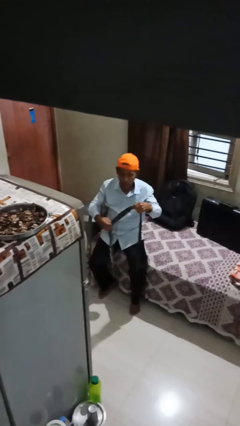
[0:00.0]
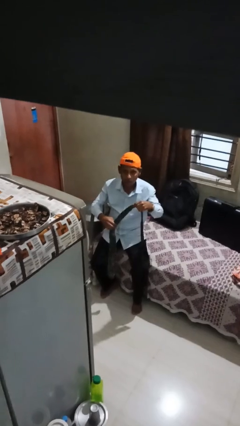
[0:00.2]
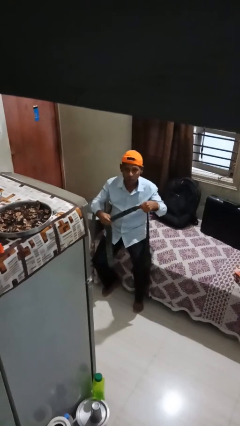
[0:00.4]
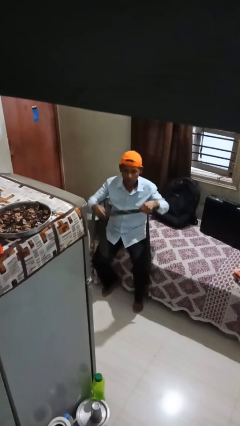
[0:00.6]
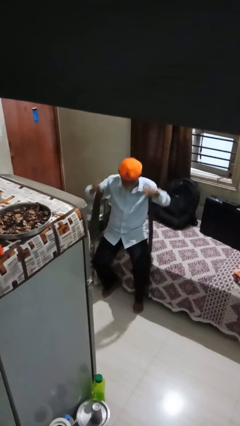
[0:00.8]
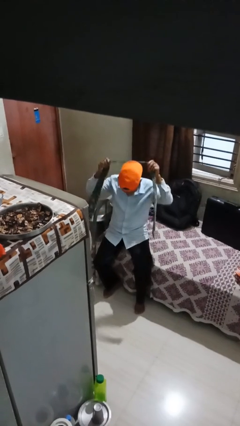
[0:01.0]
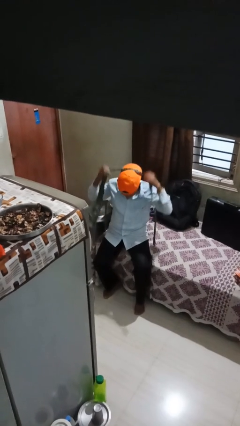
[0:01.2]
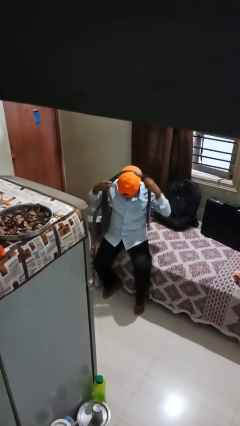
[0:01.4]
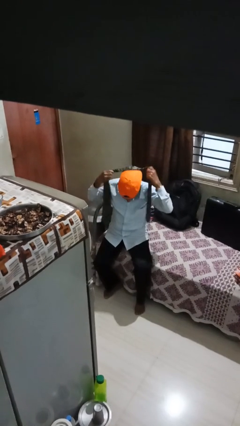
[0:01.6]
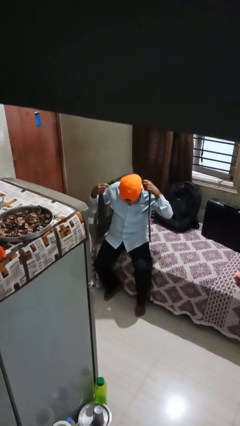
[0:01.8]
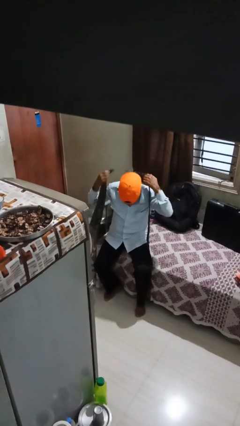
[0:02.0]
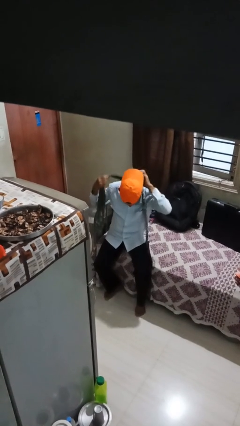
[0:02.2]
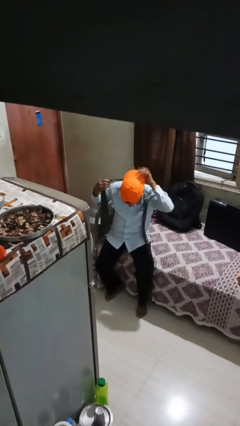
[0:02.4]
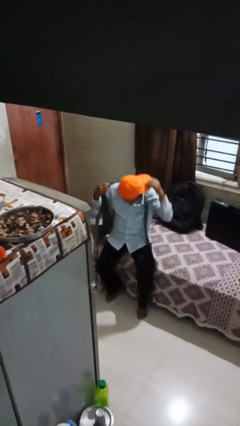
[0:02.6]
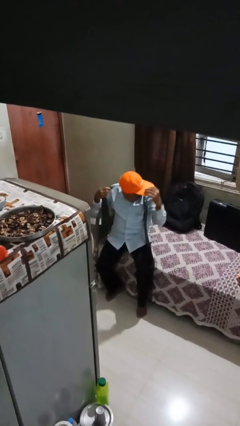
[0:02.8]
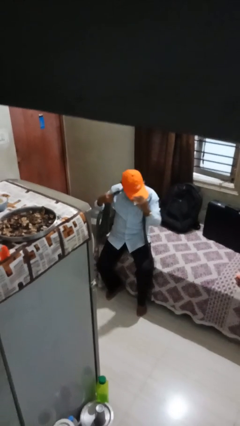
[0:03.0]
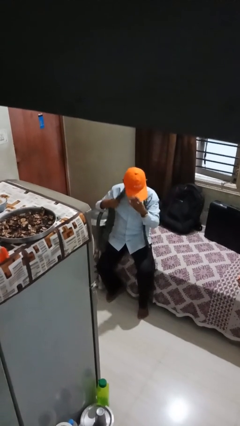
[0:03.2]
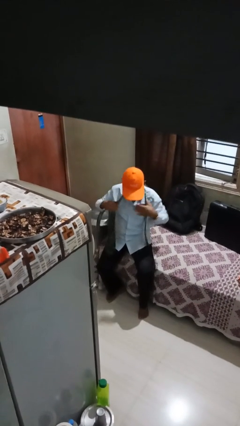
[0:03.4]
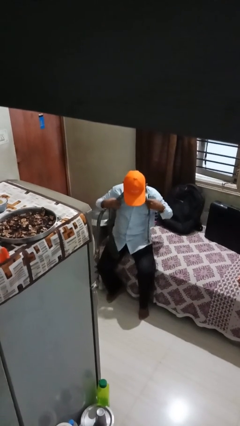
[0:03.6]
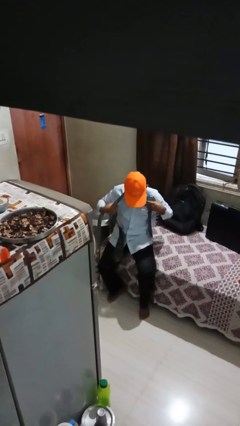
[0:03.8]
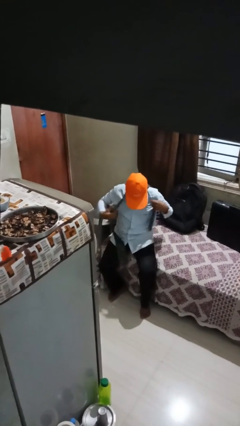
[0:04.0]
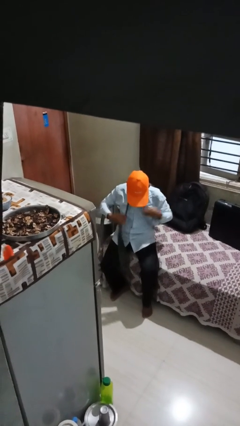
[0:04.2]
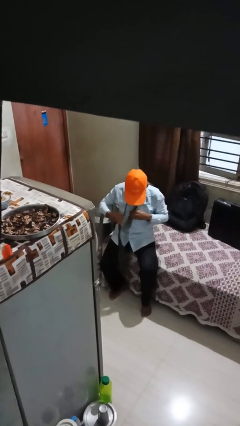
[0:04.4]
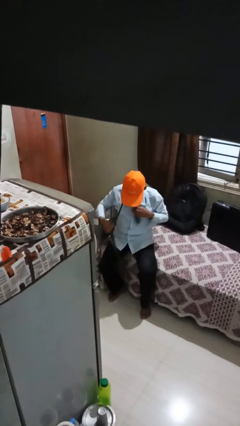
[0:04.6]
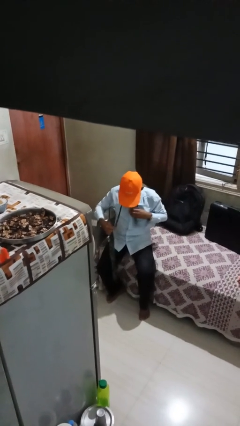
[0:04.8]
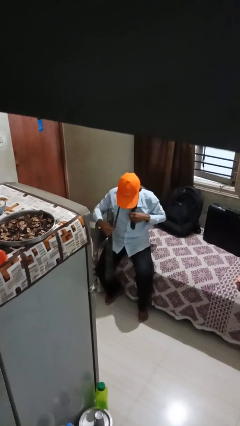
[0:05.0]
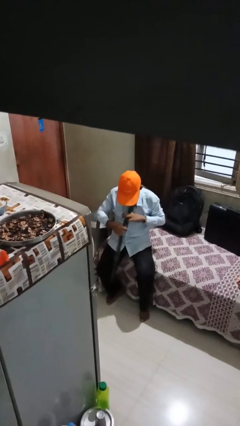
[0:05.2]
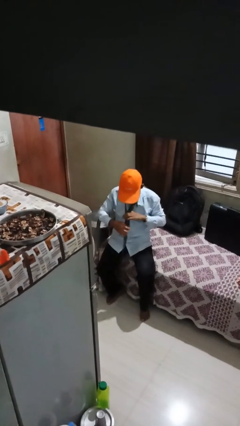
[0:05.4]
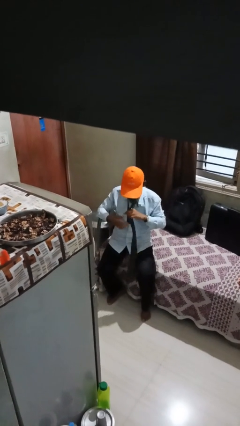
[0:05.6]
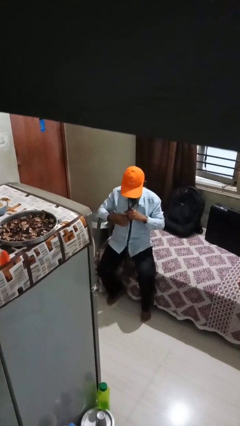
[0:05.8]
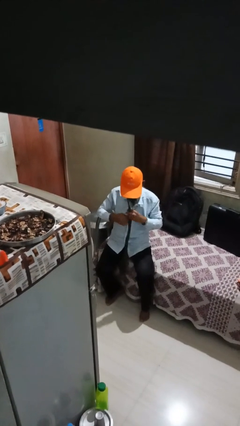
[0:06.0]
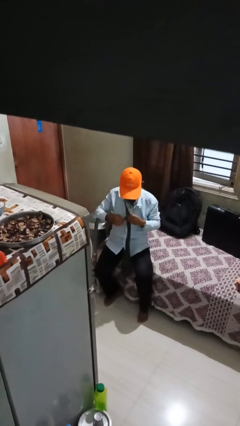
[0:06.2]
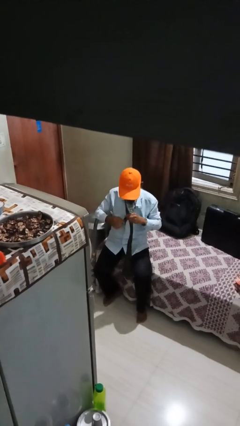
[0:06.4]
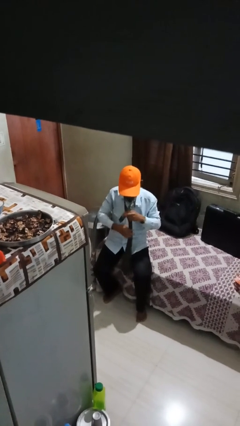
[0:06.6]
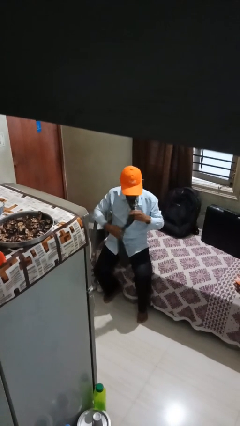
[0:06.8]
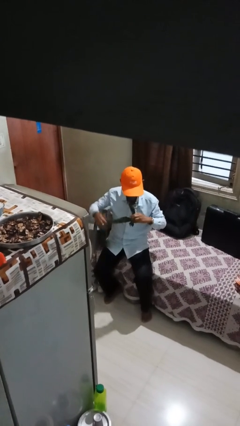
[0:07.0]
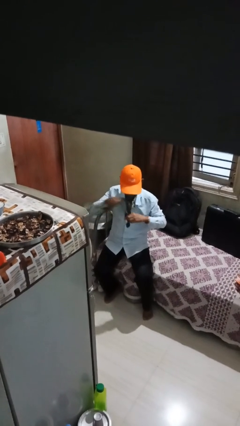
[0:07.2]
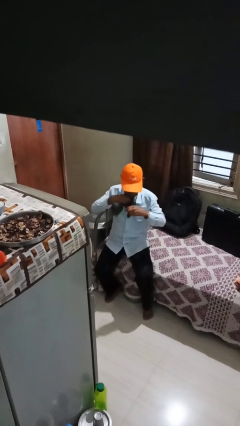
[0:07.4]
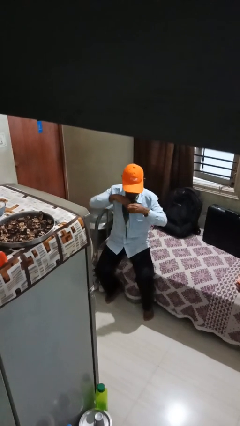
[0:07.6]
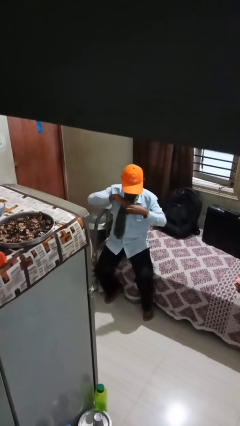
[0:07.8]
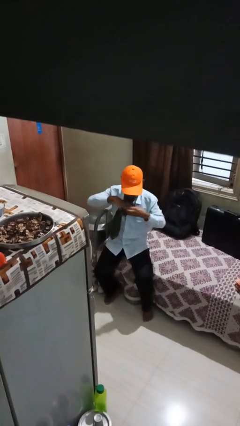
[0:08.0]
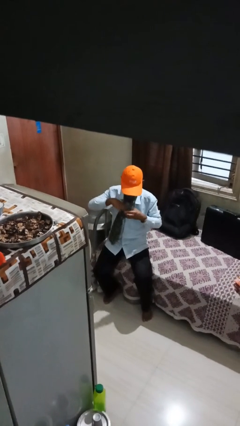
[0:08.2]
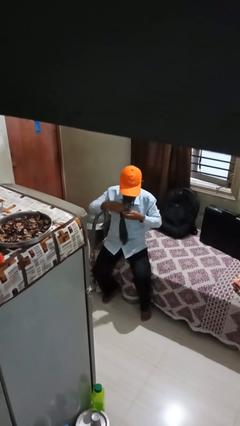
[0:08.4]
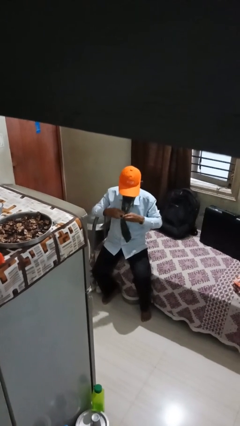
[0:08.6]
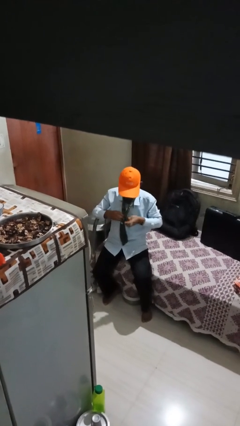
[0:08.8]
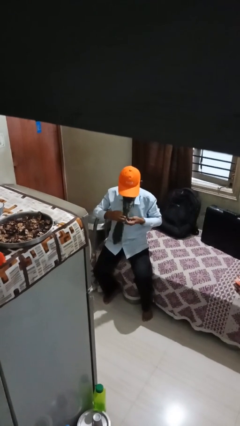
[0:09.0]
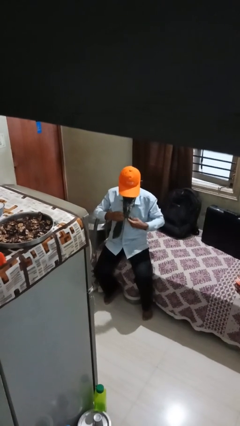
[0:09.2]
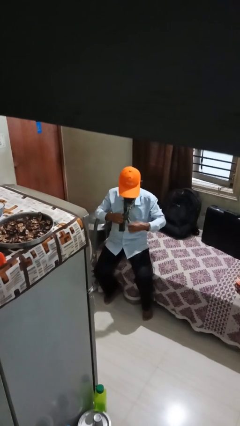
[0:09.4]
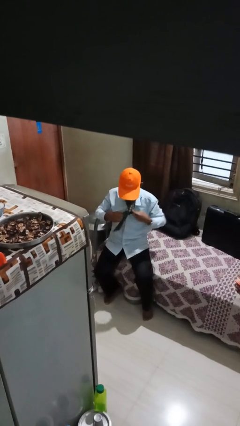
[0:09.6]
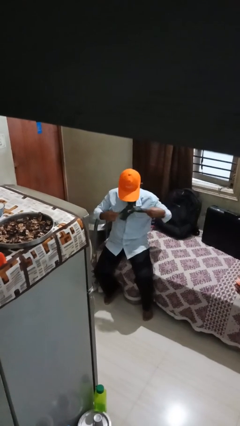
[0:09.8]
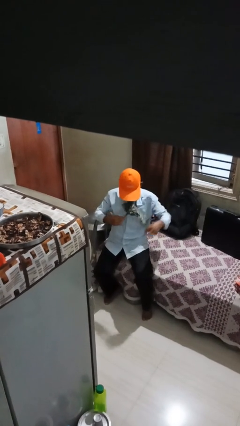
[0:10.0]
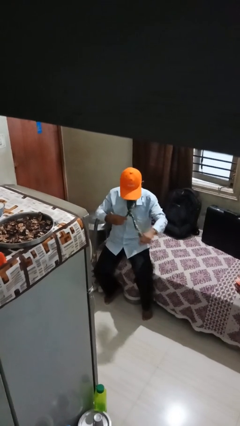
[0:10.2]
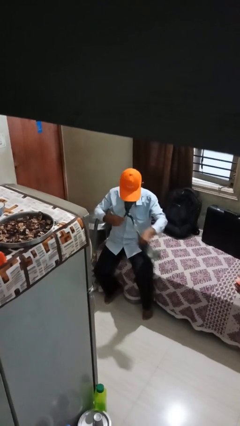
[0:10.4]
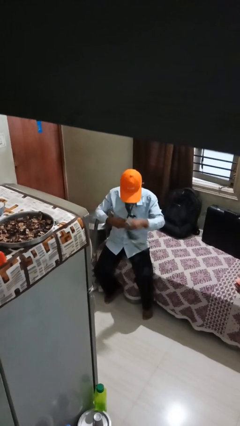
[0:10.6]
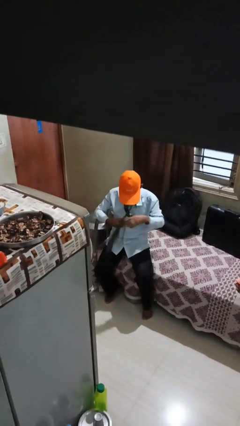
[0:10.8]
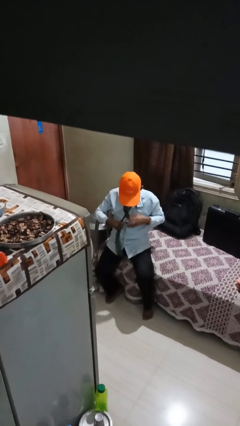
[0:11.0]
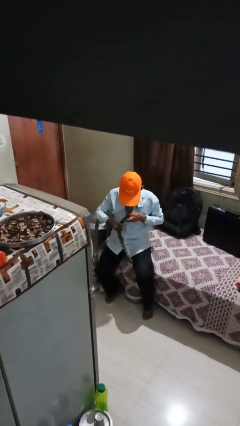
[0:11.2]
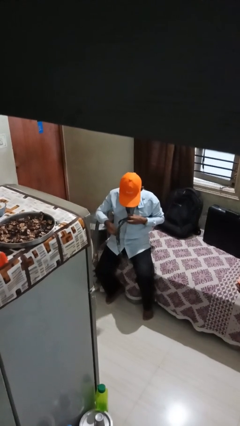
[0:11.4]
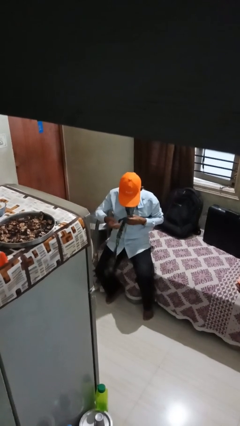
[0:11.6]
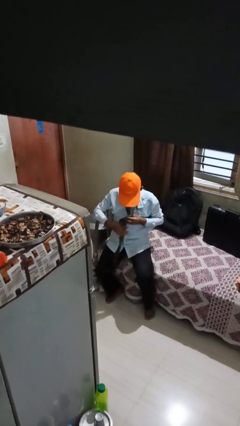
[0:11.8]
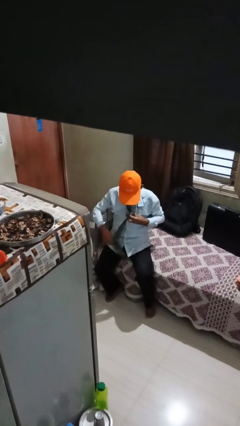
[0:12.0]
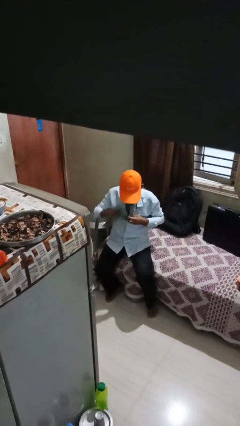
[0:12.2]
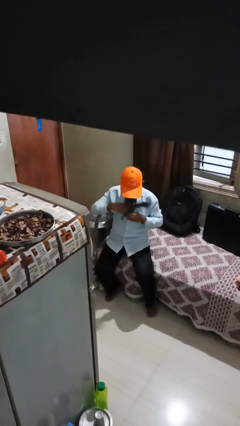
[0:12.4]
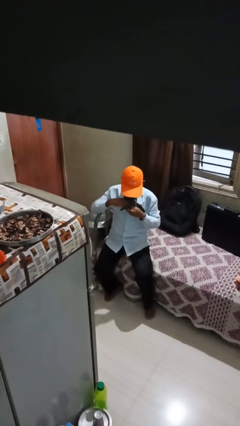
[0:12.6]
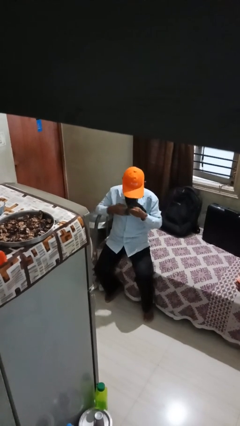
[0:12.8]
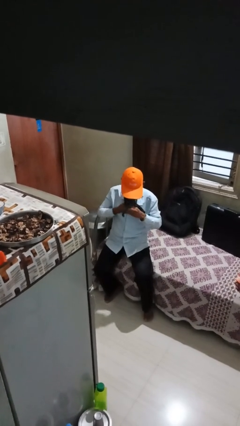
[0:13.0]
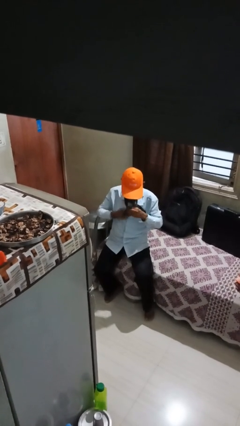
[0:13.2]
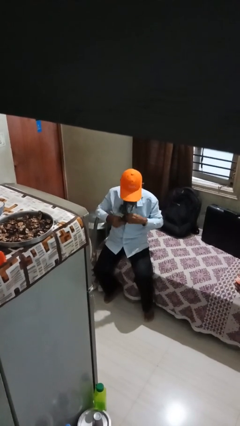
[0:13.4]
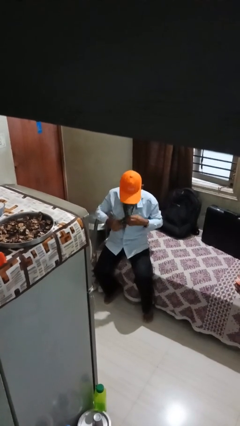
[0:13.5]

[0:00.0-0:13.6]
person puts on necktie

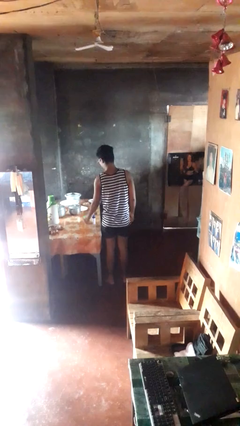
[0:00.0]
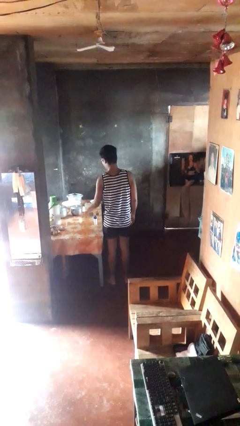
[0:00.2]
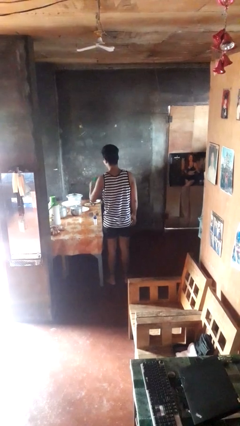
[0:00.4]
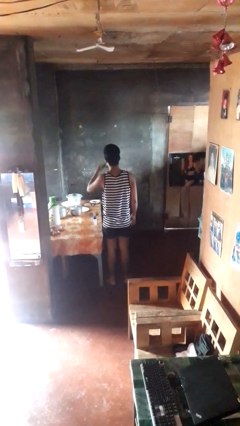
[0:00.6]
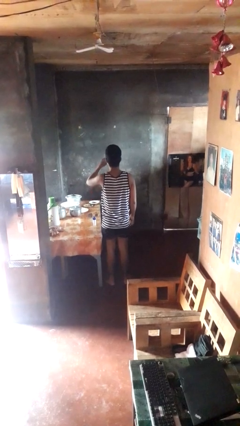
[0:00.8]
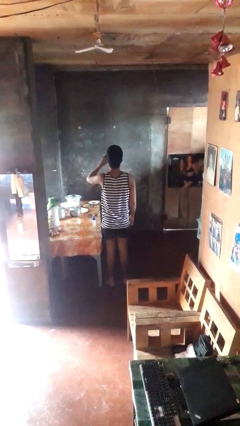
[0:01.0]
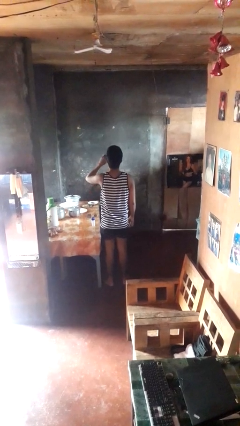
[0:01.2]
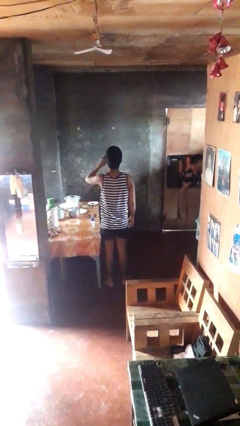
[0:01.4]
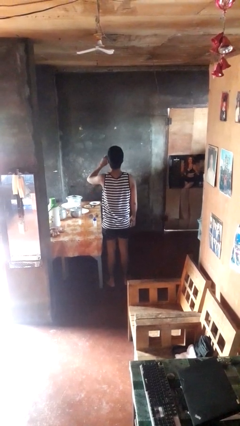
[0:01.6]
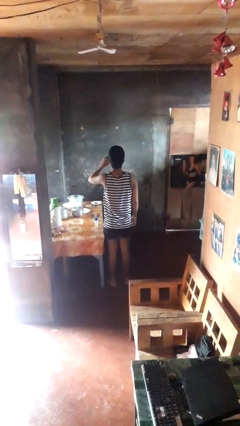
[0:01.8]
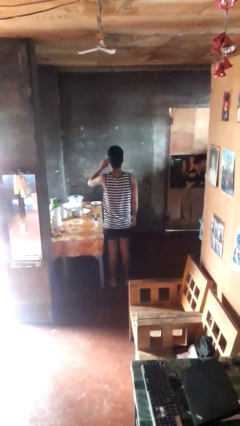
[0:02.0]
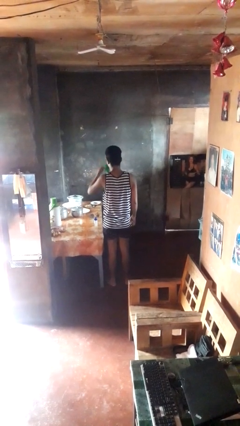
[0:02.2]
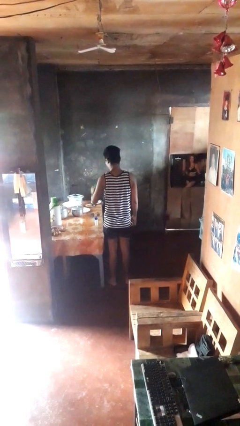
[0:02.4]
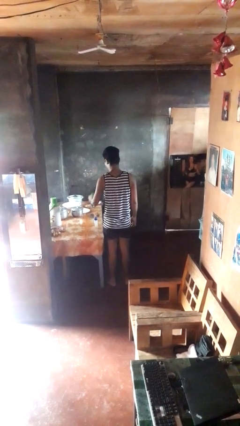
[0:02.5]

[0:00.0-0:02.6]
person drinks from cup

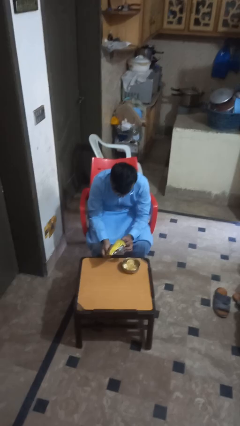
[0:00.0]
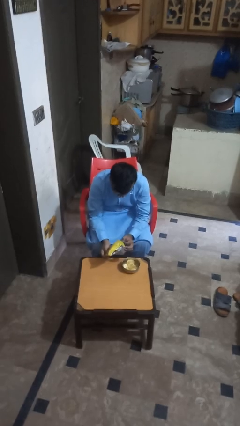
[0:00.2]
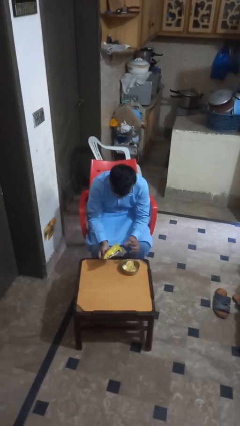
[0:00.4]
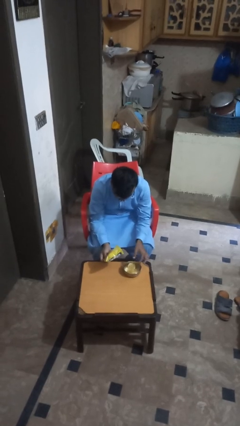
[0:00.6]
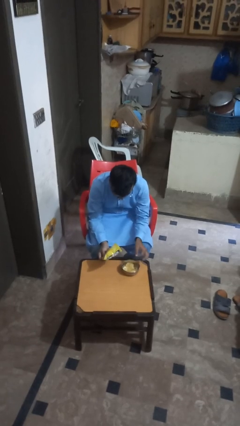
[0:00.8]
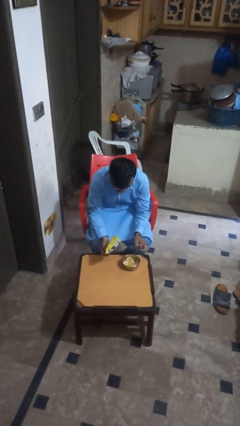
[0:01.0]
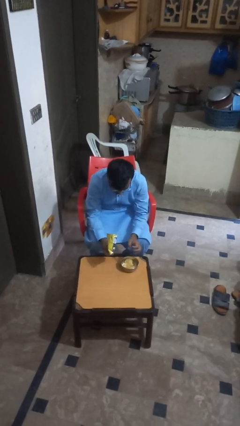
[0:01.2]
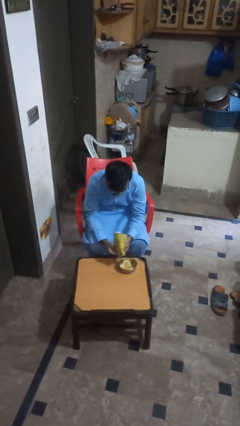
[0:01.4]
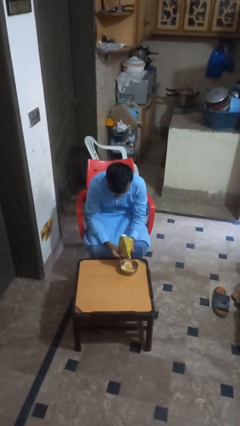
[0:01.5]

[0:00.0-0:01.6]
person pours into bowl
